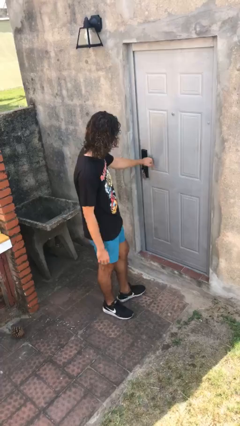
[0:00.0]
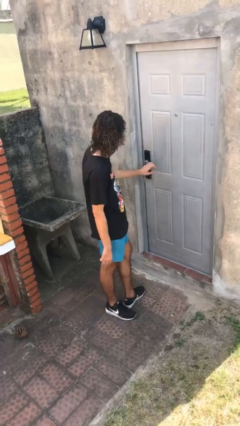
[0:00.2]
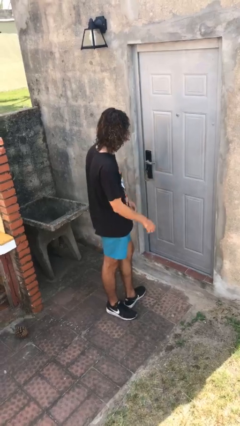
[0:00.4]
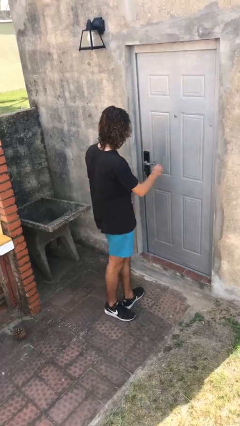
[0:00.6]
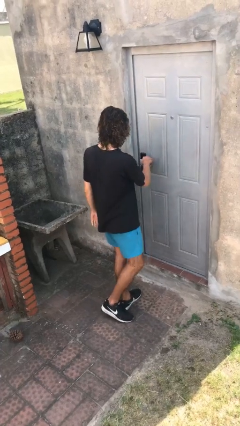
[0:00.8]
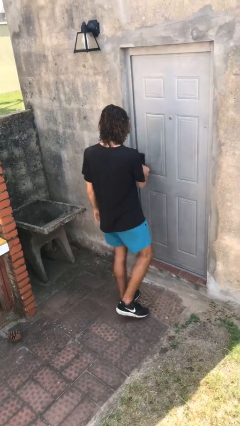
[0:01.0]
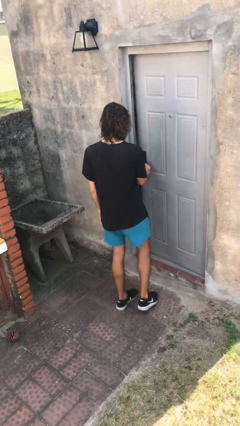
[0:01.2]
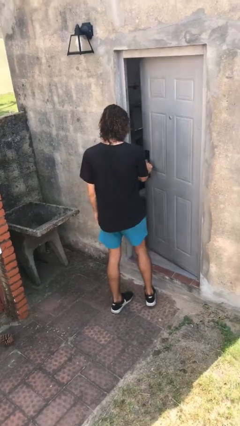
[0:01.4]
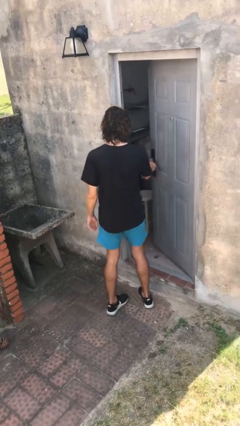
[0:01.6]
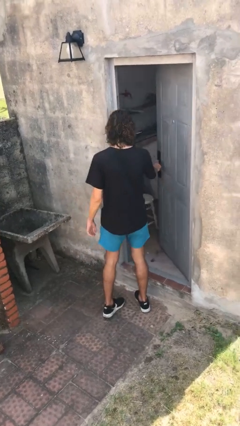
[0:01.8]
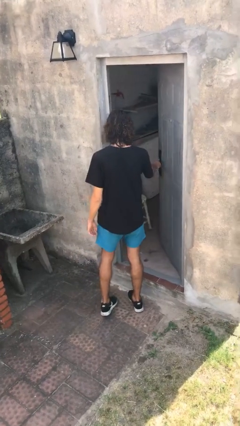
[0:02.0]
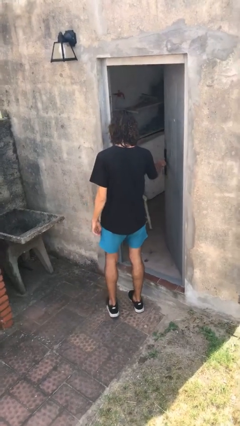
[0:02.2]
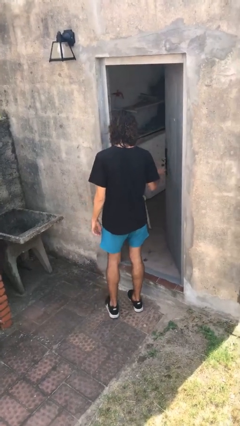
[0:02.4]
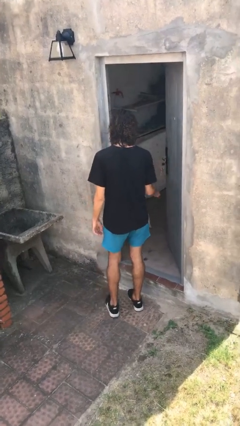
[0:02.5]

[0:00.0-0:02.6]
person opens facility door

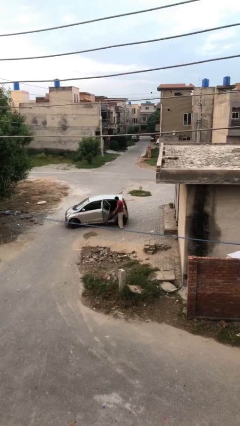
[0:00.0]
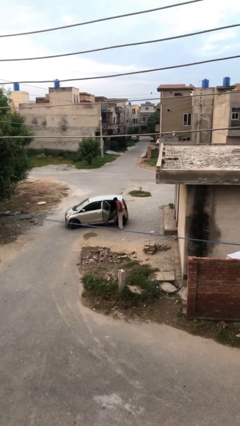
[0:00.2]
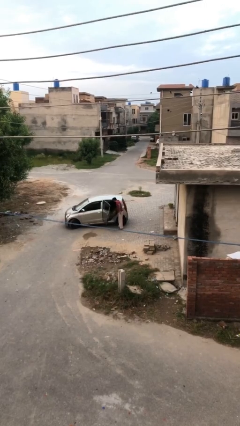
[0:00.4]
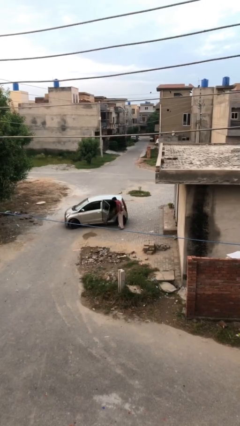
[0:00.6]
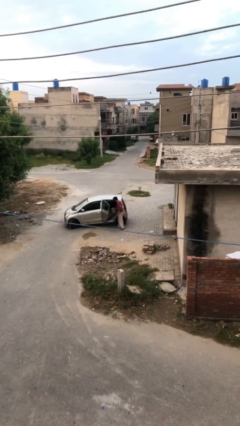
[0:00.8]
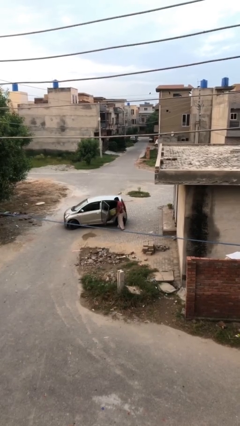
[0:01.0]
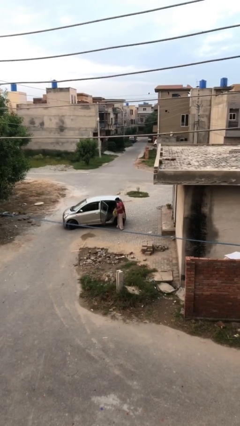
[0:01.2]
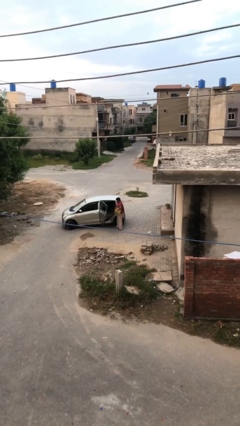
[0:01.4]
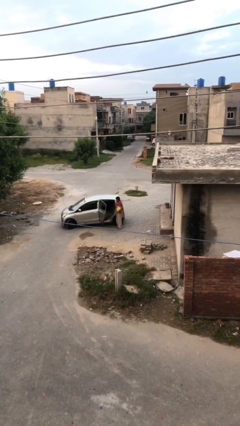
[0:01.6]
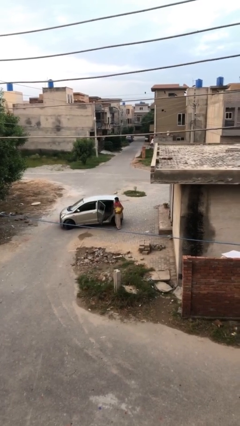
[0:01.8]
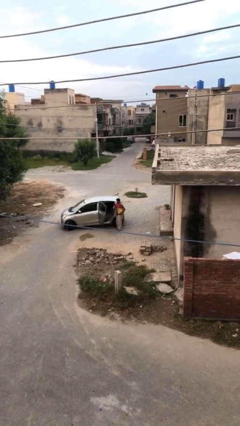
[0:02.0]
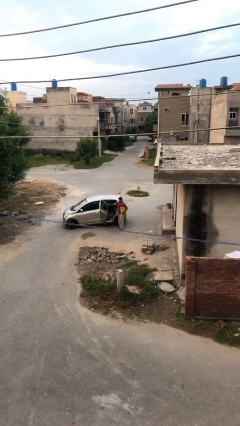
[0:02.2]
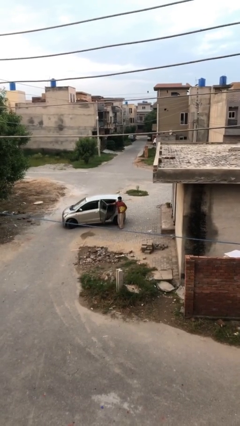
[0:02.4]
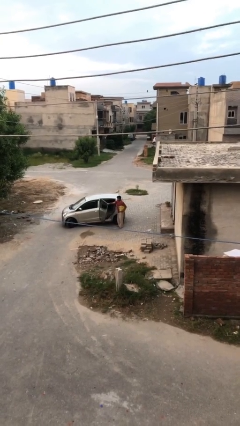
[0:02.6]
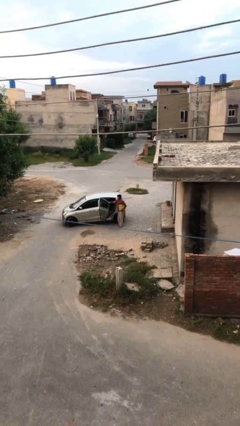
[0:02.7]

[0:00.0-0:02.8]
person unloads car

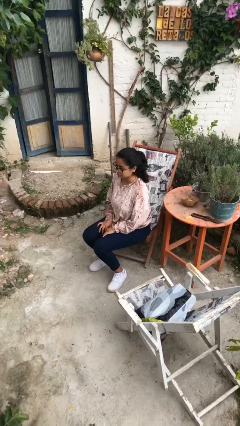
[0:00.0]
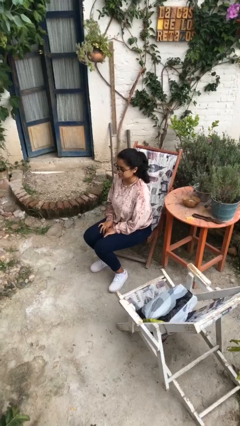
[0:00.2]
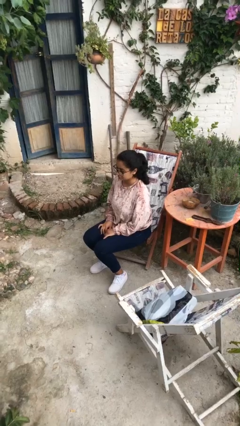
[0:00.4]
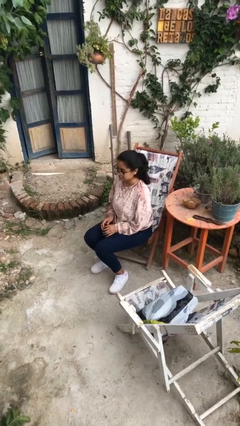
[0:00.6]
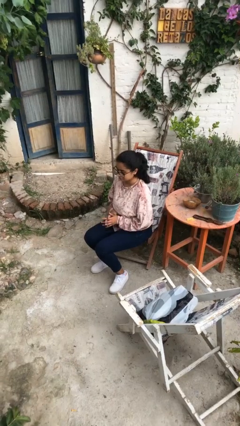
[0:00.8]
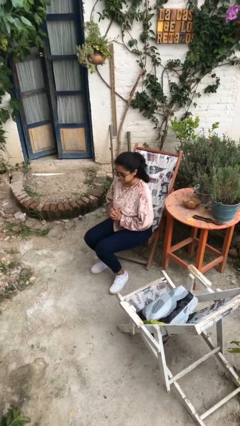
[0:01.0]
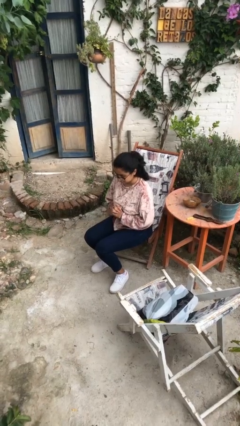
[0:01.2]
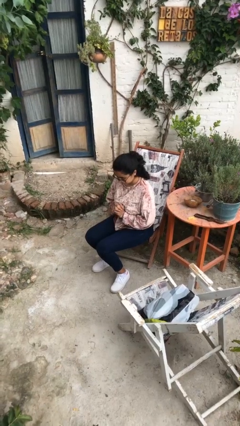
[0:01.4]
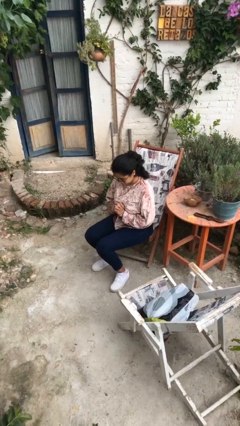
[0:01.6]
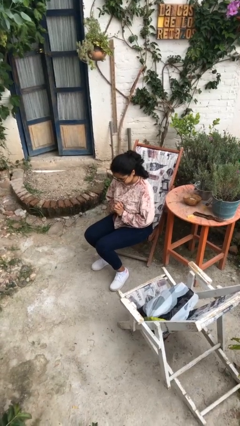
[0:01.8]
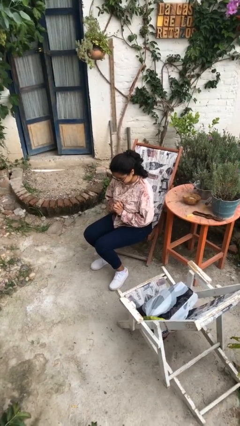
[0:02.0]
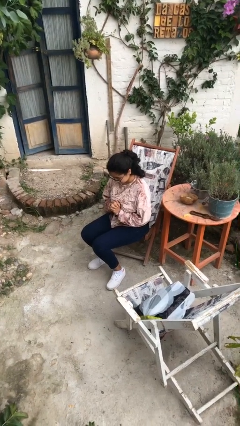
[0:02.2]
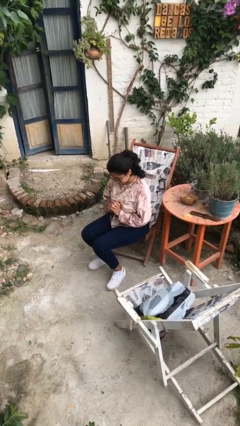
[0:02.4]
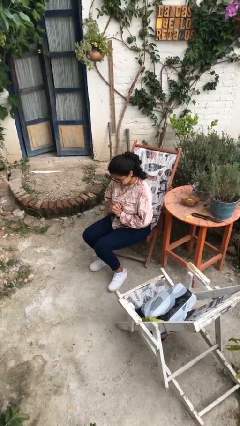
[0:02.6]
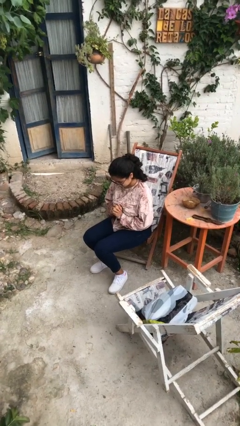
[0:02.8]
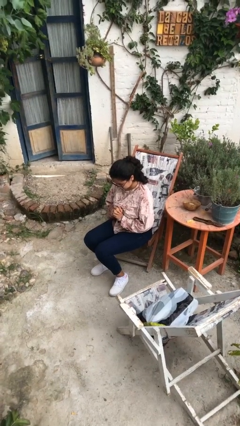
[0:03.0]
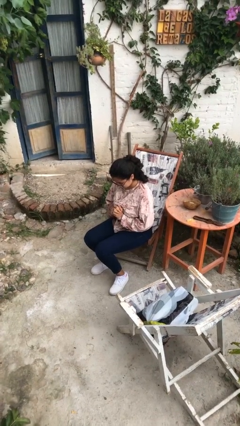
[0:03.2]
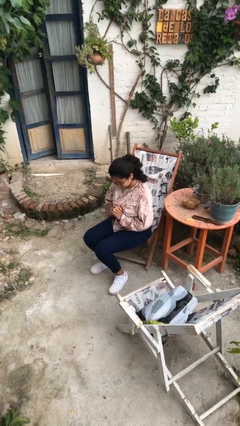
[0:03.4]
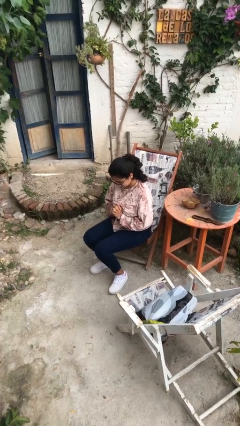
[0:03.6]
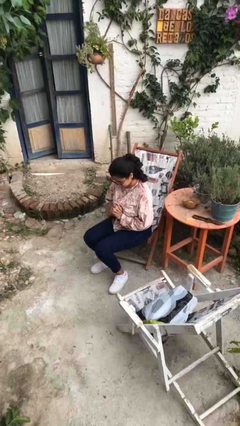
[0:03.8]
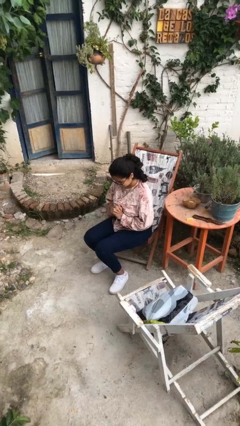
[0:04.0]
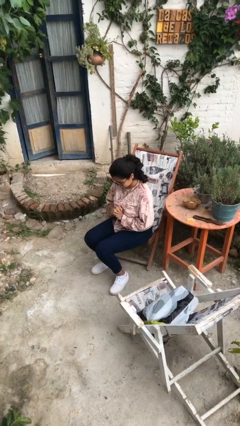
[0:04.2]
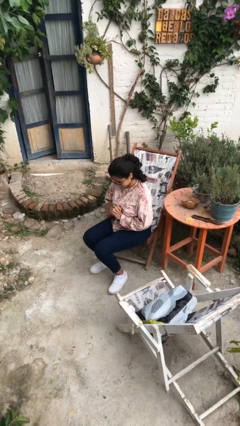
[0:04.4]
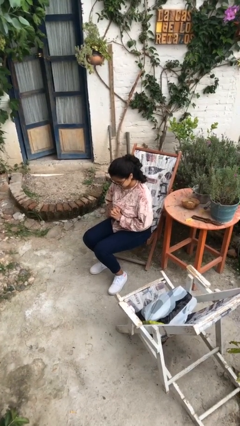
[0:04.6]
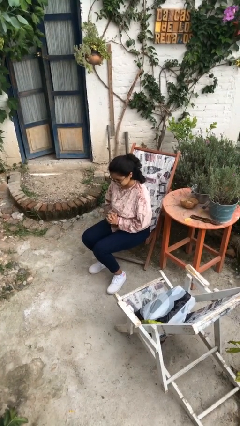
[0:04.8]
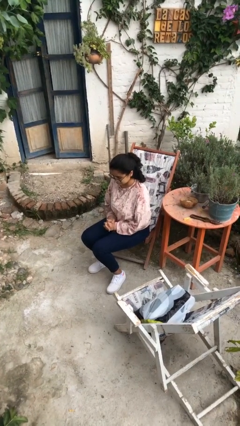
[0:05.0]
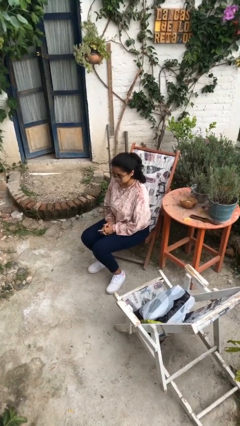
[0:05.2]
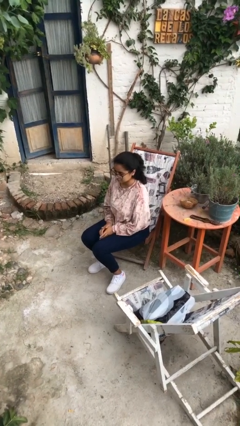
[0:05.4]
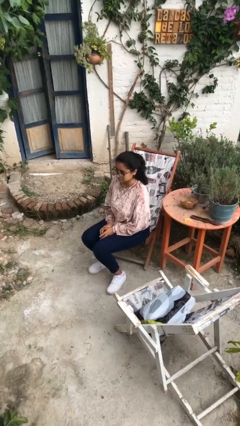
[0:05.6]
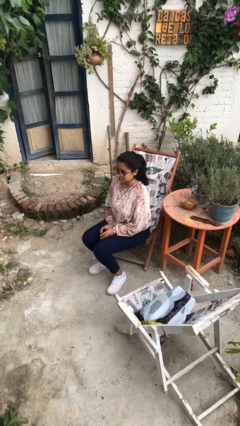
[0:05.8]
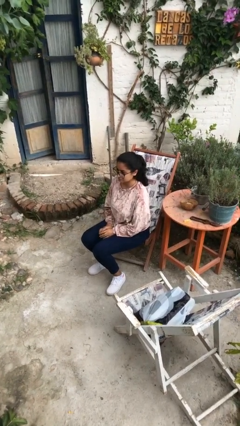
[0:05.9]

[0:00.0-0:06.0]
person prays

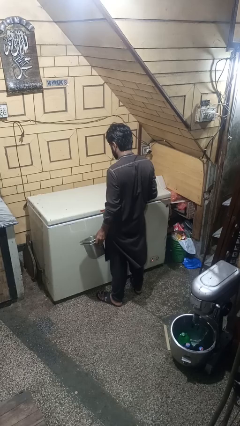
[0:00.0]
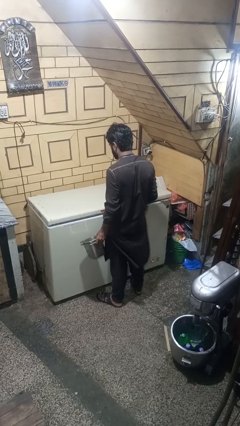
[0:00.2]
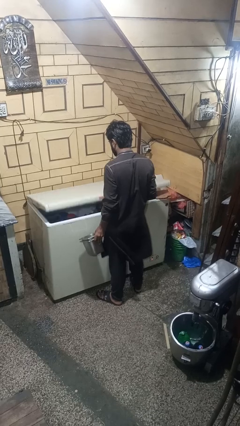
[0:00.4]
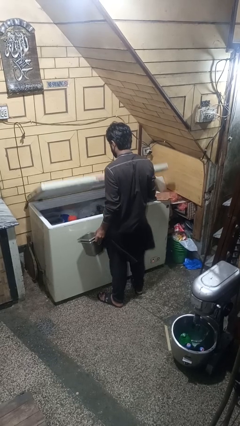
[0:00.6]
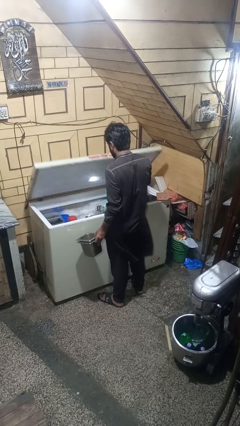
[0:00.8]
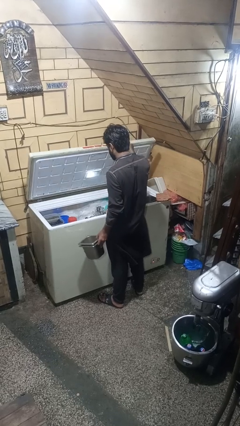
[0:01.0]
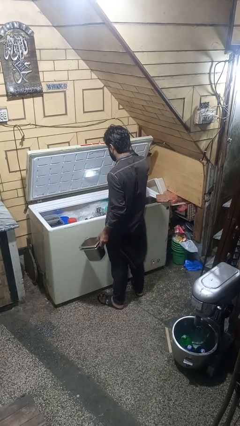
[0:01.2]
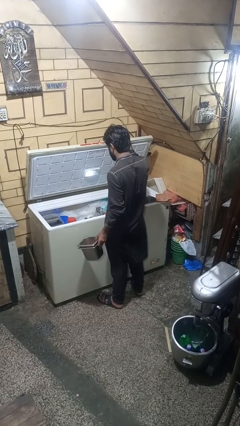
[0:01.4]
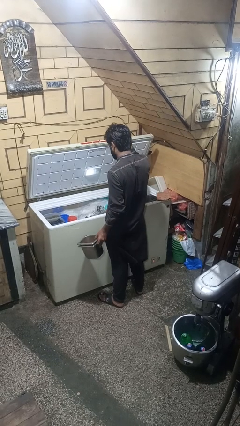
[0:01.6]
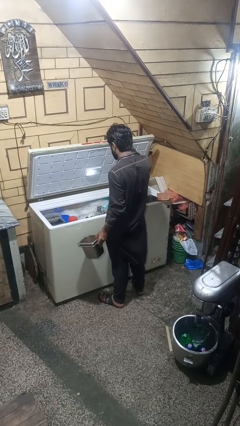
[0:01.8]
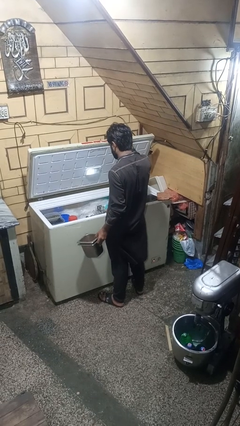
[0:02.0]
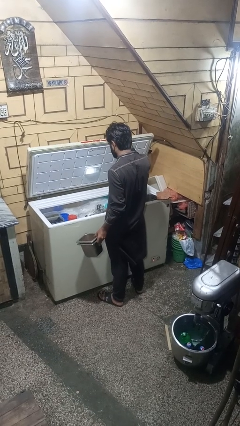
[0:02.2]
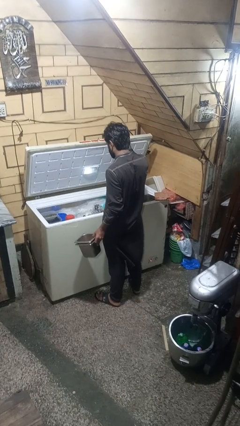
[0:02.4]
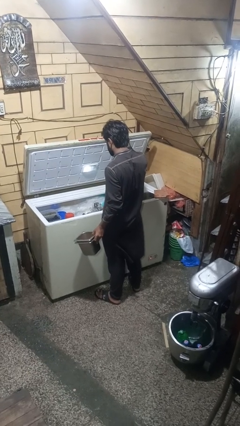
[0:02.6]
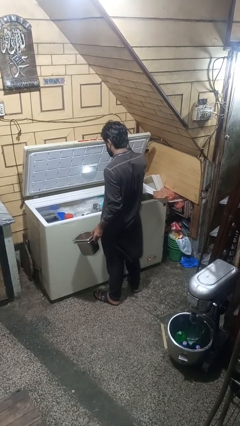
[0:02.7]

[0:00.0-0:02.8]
person opens refrigerator

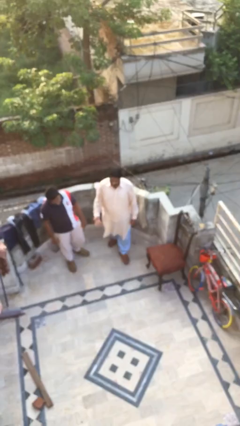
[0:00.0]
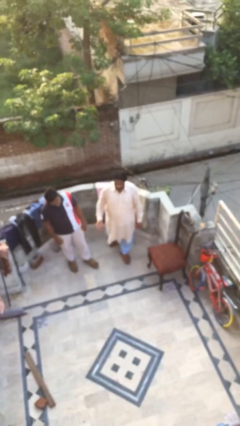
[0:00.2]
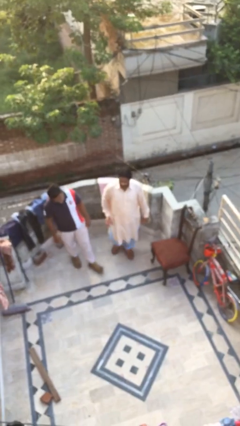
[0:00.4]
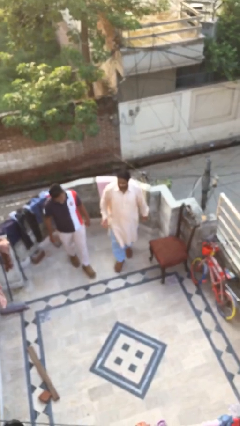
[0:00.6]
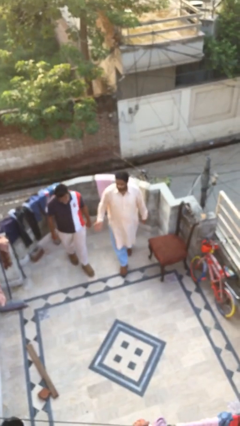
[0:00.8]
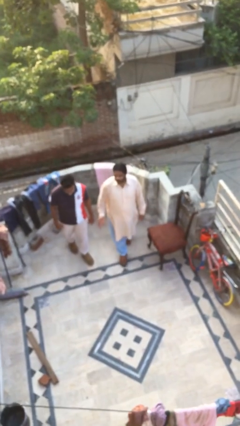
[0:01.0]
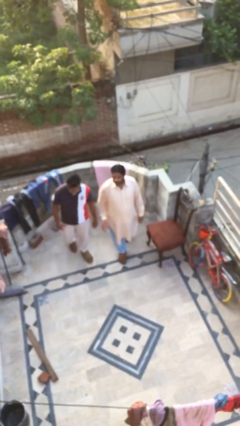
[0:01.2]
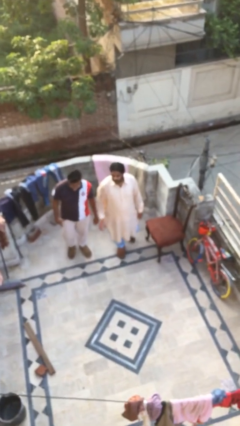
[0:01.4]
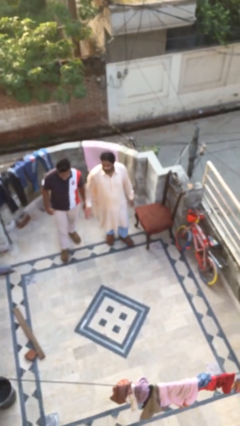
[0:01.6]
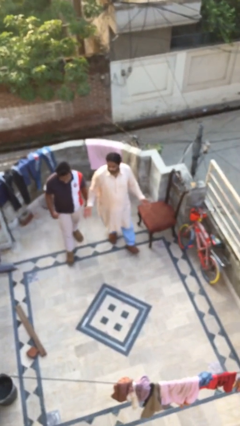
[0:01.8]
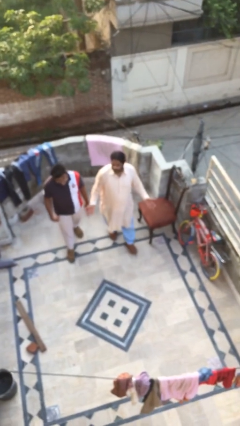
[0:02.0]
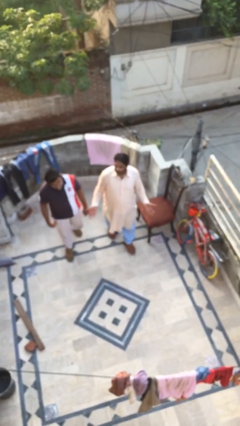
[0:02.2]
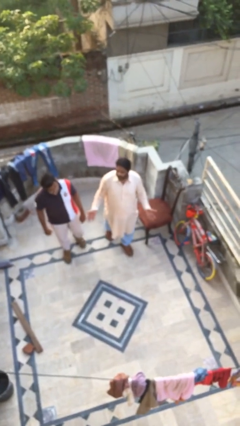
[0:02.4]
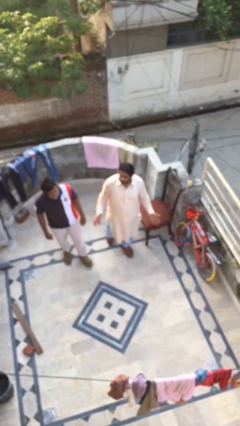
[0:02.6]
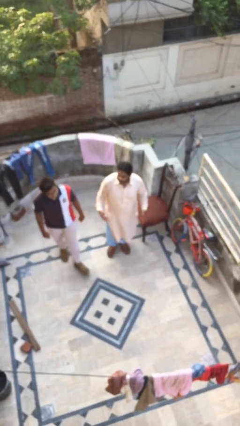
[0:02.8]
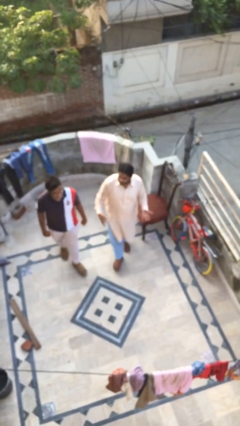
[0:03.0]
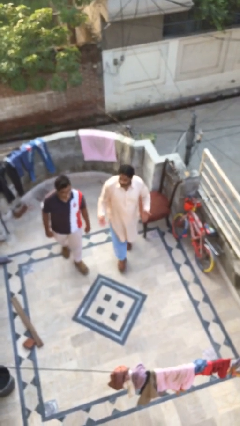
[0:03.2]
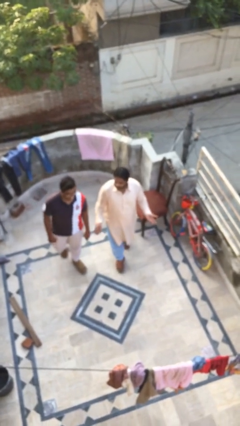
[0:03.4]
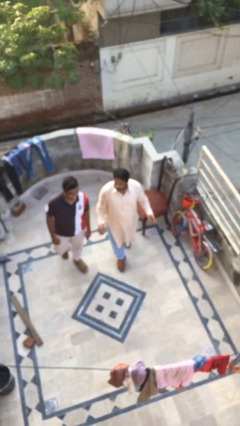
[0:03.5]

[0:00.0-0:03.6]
person talks to person
